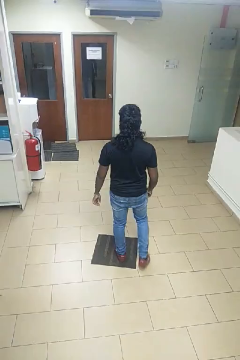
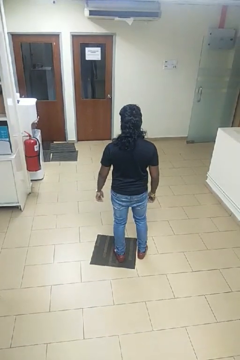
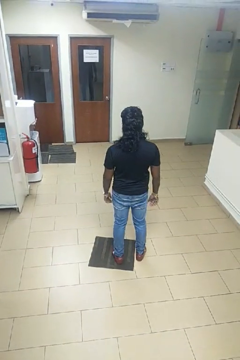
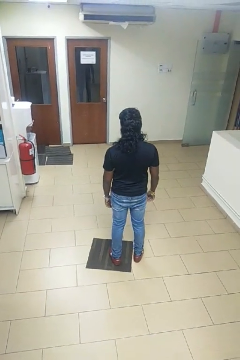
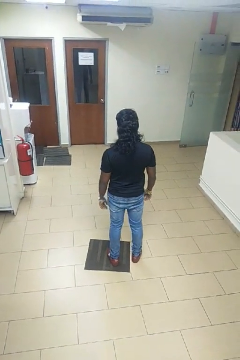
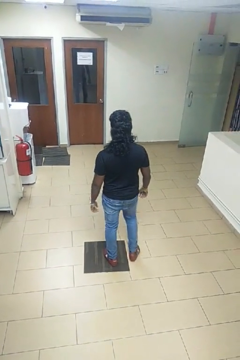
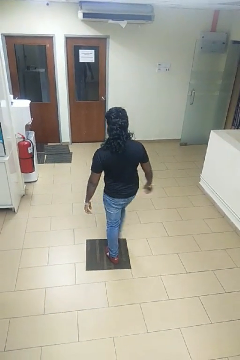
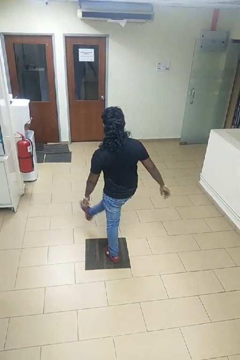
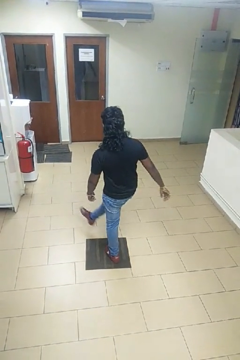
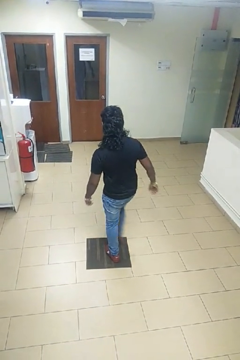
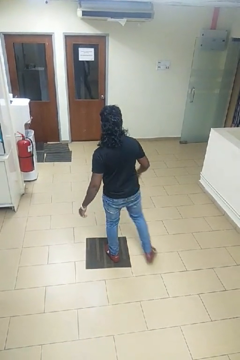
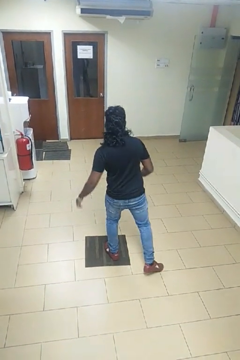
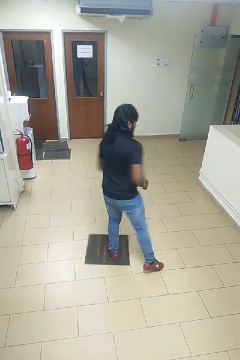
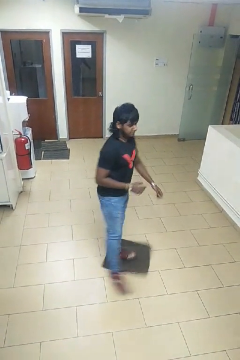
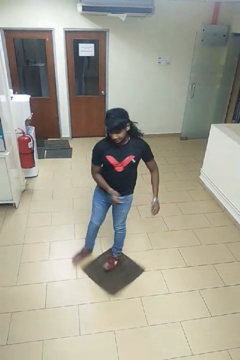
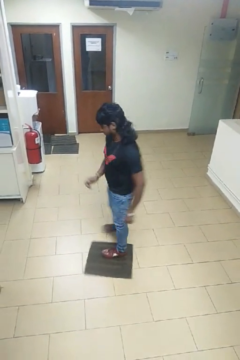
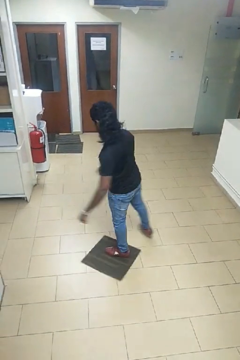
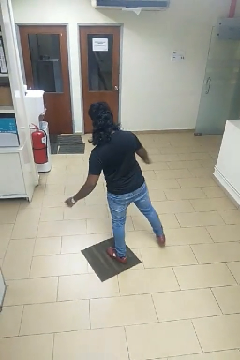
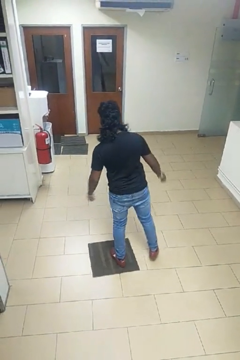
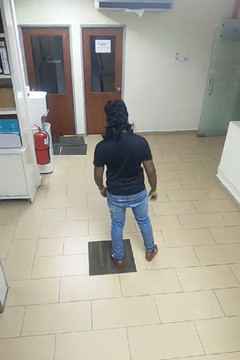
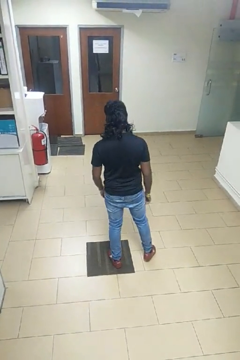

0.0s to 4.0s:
person twirls

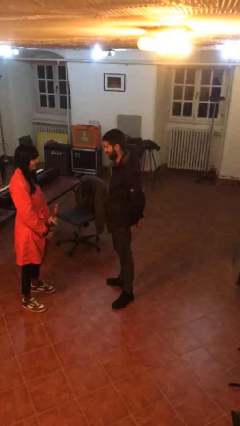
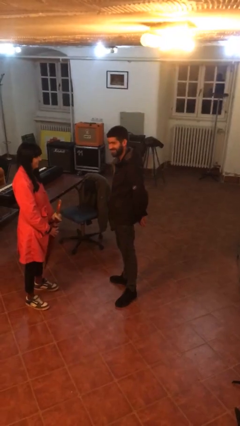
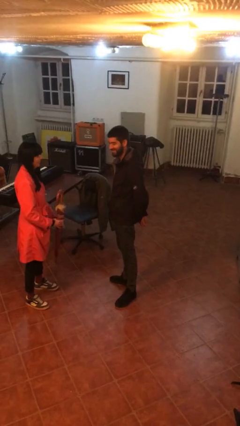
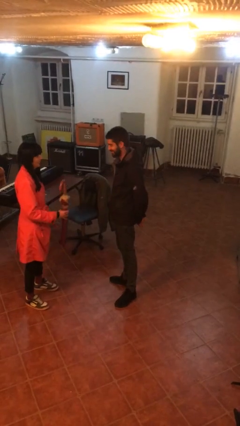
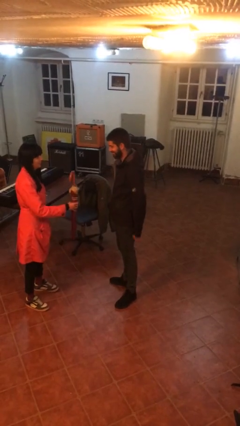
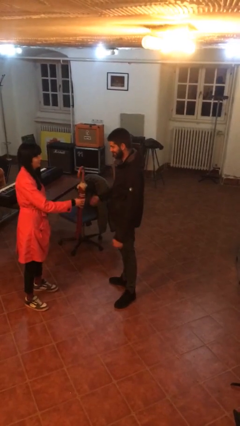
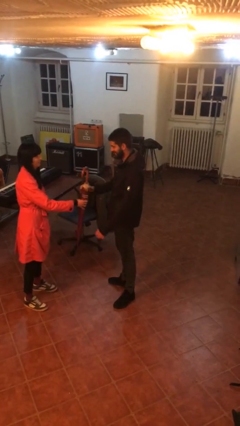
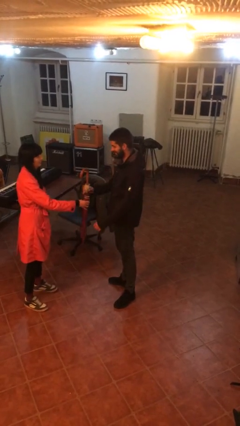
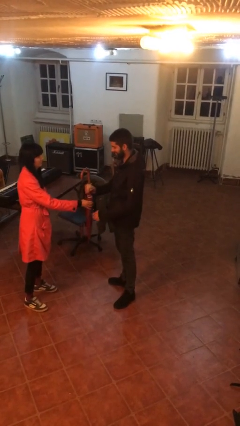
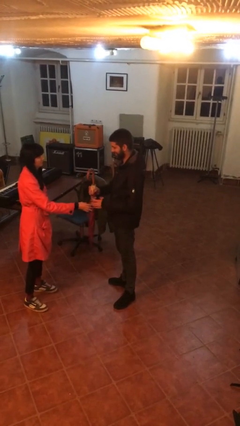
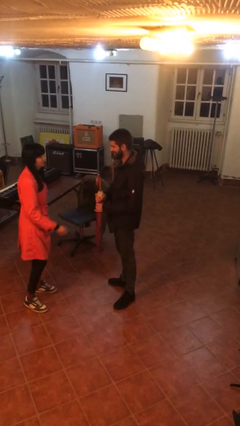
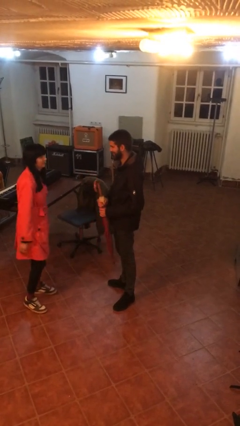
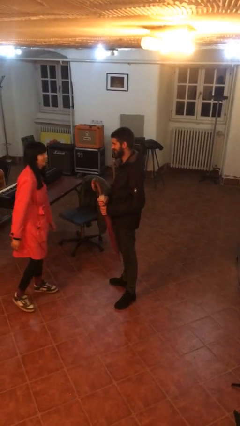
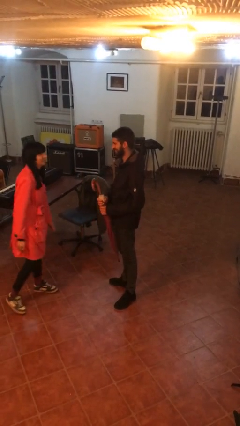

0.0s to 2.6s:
person transfers object to person

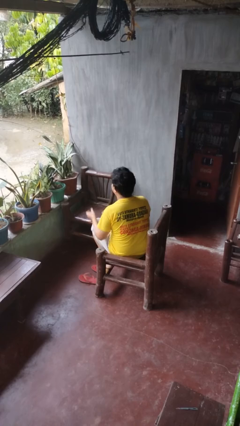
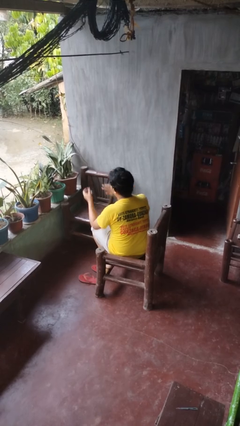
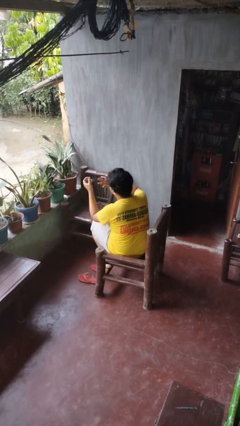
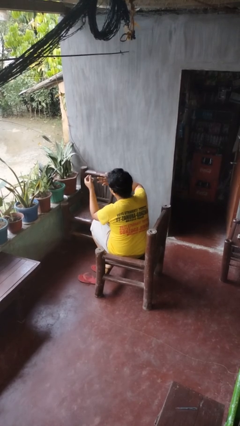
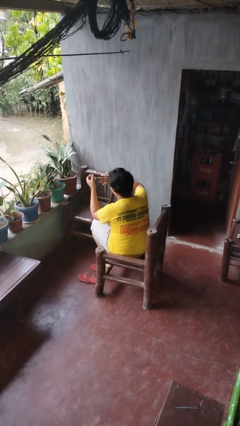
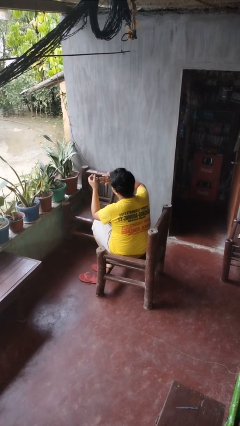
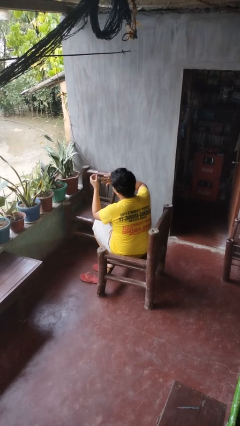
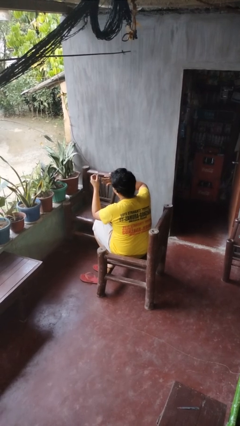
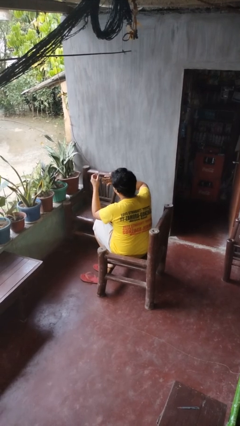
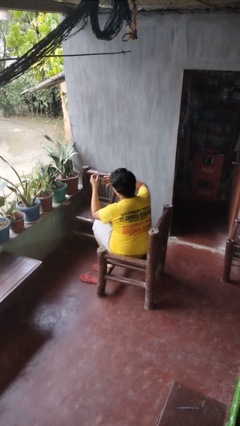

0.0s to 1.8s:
person clips fingernails

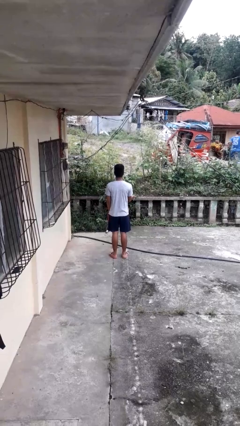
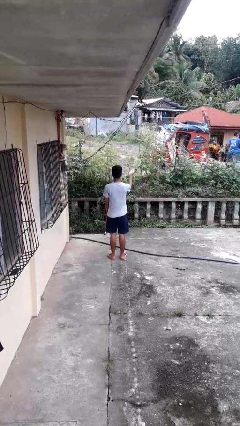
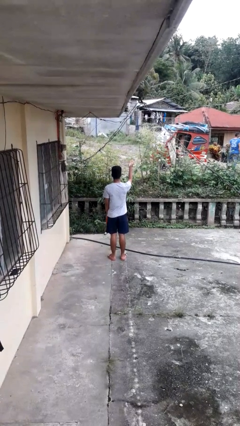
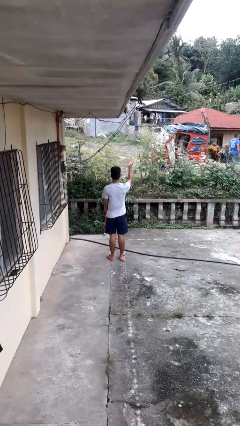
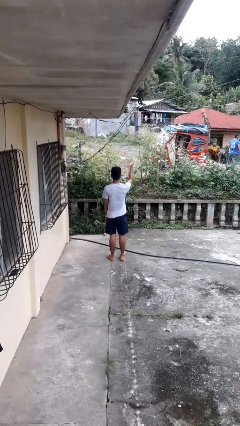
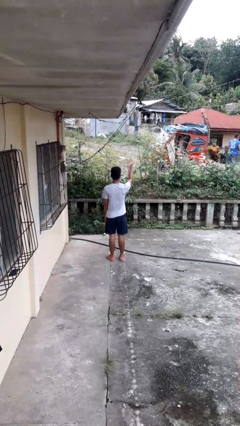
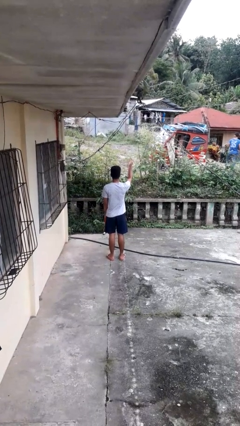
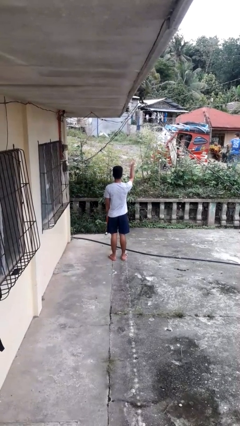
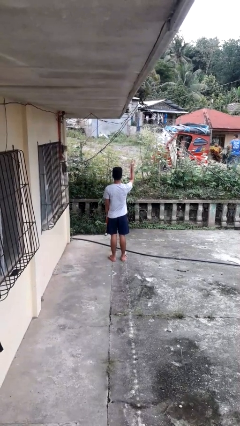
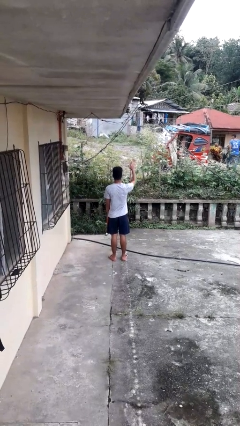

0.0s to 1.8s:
person gestures swipe up

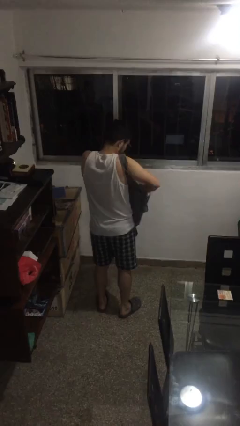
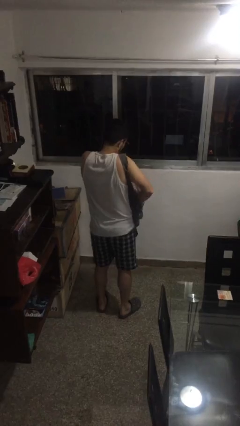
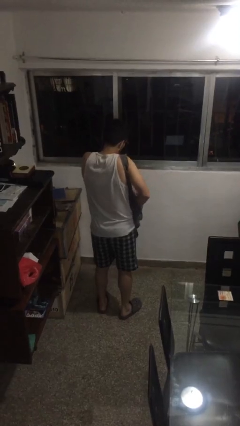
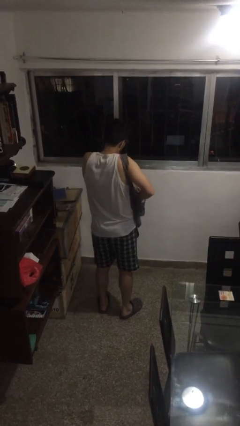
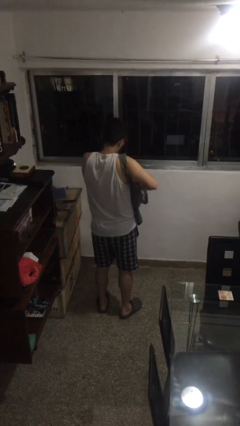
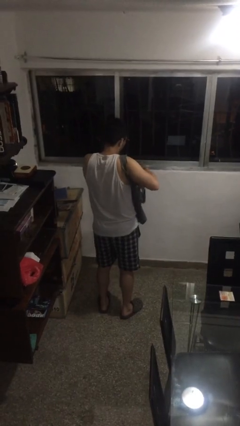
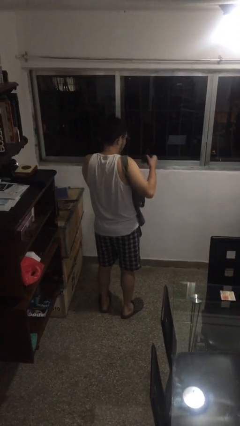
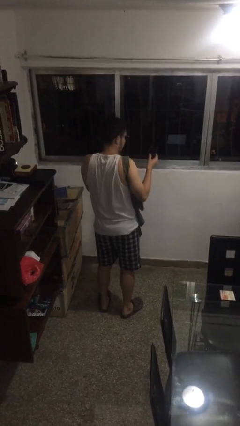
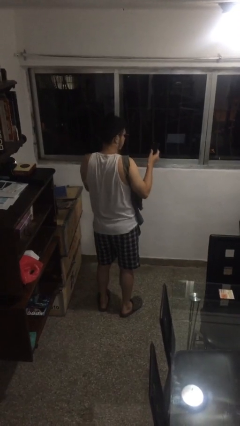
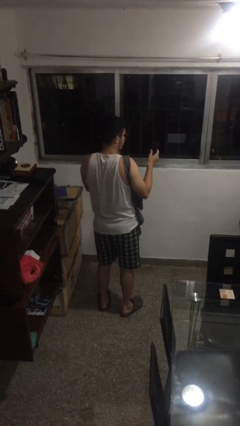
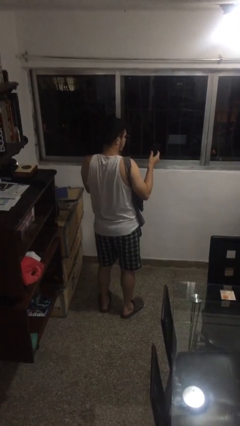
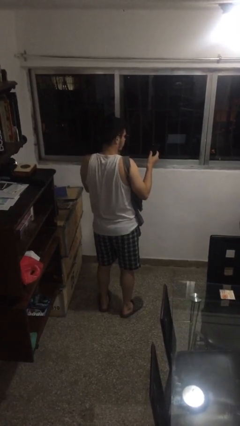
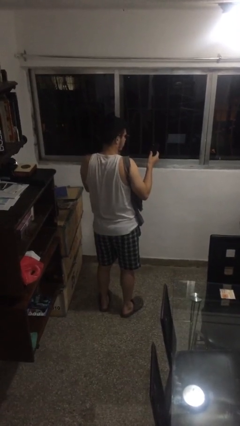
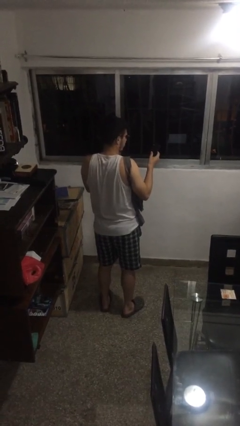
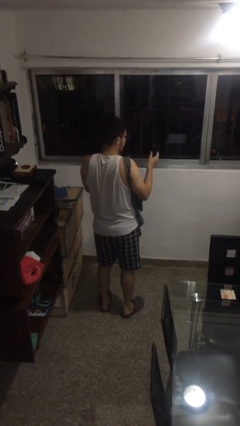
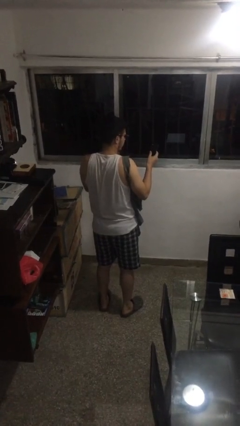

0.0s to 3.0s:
person takes object from purse

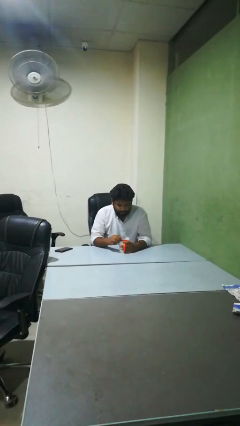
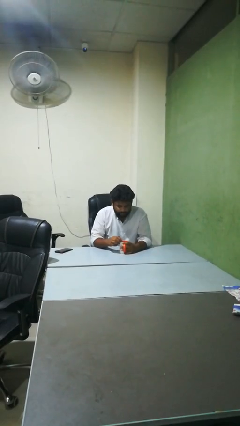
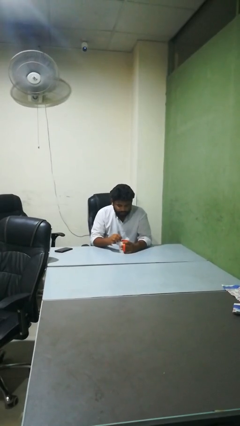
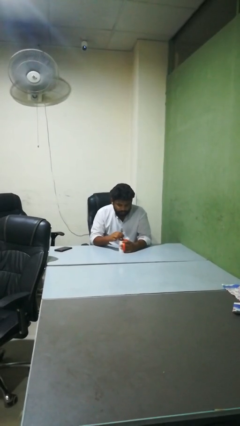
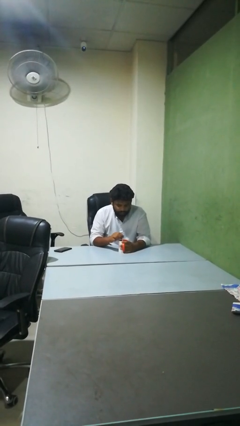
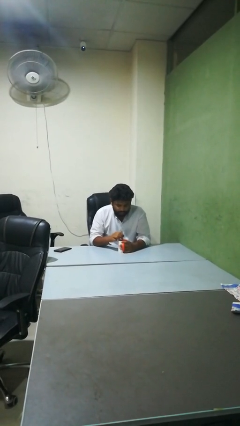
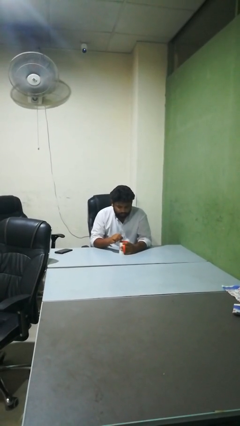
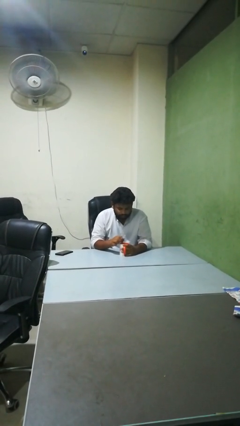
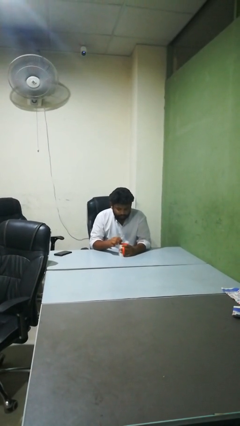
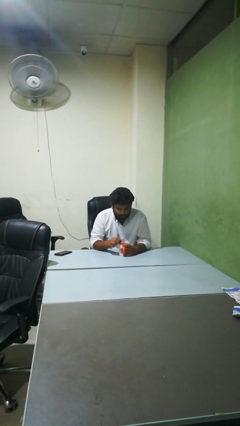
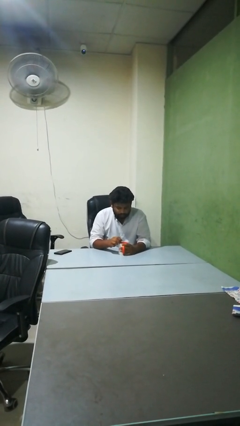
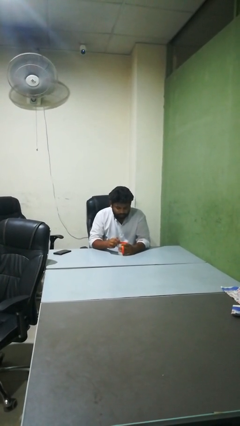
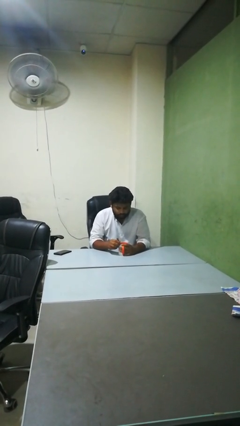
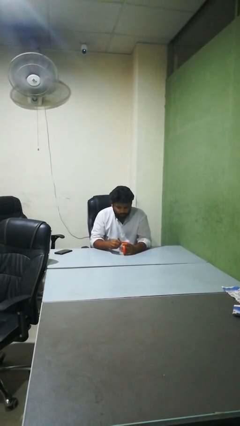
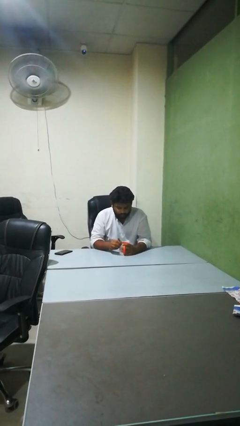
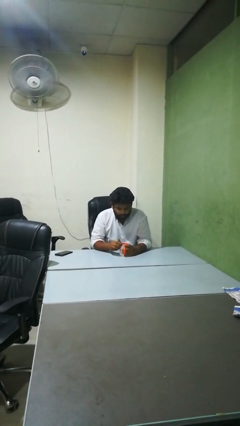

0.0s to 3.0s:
person stirs mug

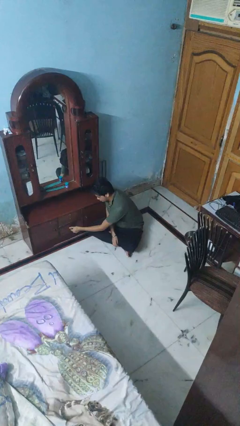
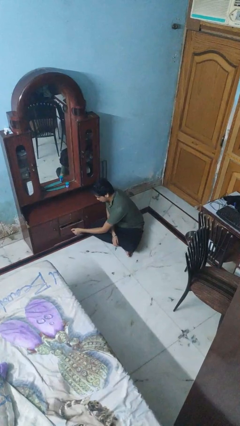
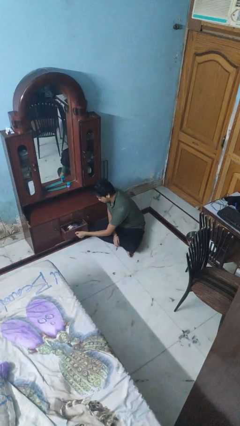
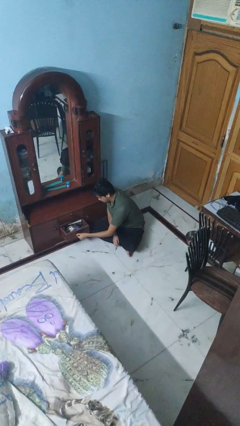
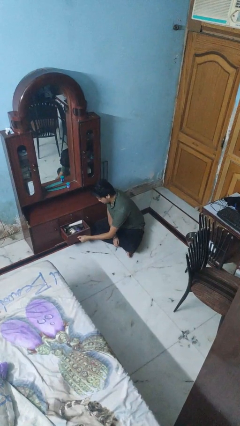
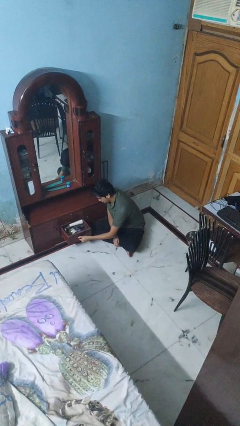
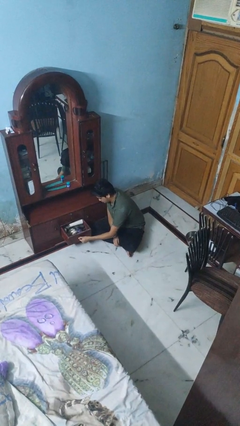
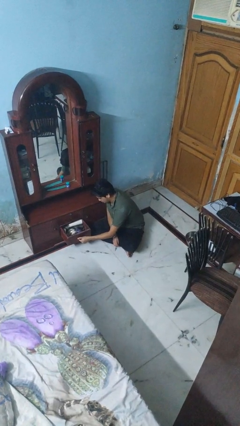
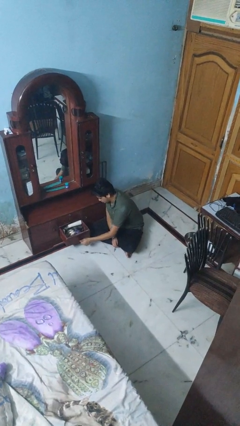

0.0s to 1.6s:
person opens dresser drawer
